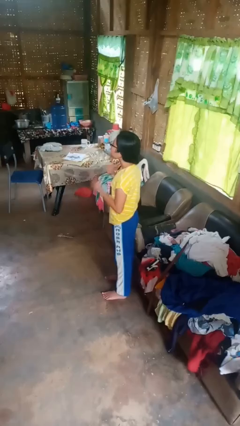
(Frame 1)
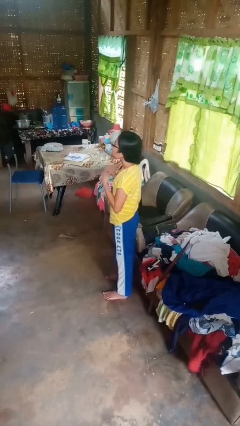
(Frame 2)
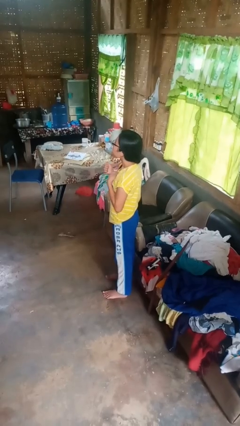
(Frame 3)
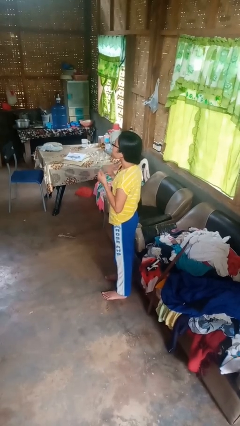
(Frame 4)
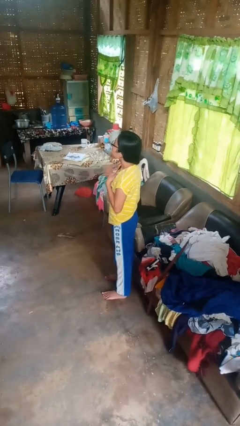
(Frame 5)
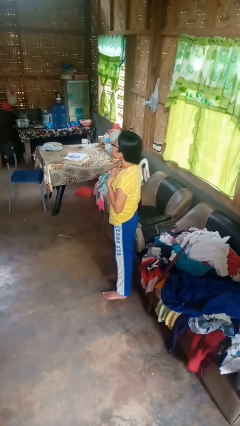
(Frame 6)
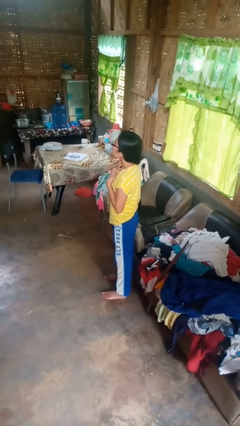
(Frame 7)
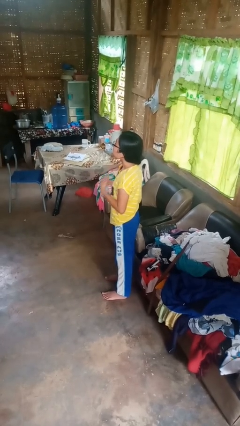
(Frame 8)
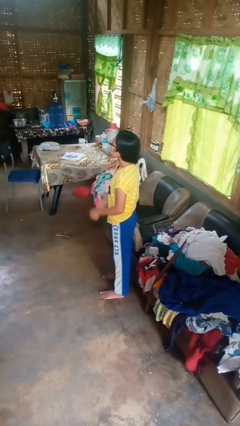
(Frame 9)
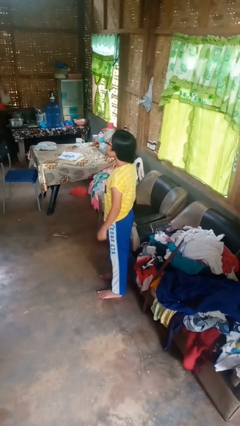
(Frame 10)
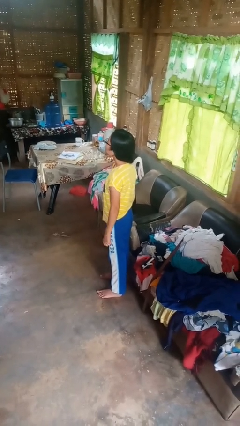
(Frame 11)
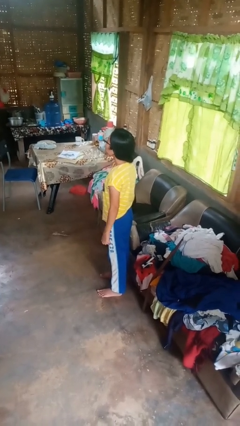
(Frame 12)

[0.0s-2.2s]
person drums on chest

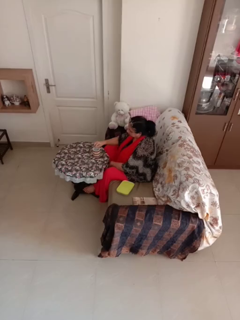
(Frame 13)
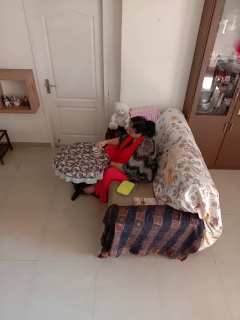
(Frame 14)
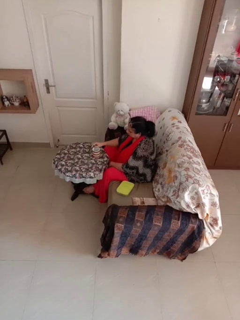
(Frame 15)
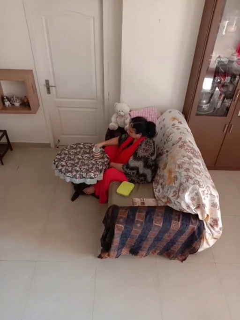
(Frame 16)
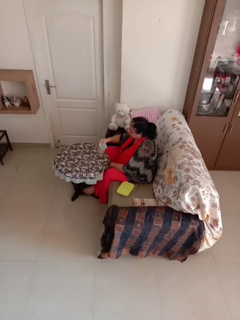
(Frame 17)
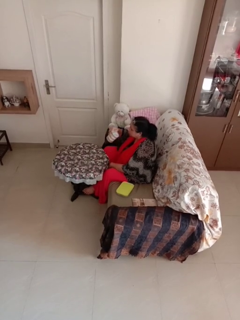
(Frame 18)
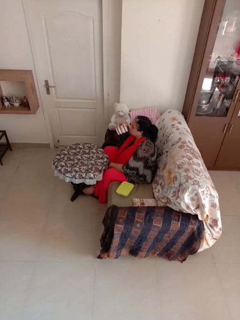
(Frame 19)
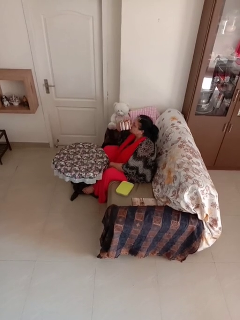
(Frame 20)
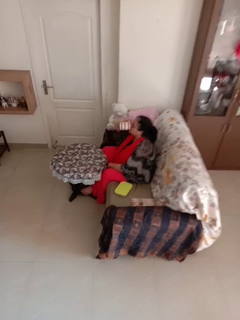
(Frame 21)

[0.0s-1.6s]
person stirs mug

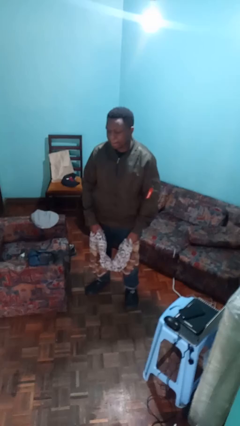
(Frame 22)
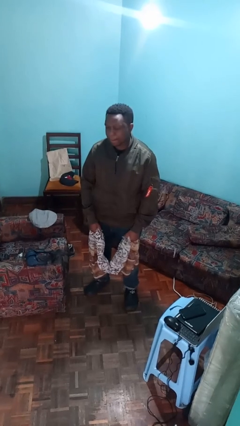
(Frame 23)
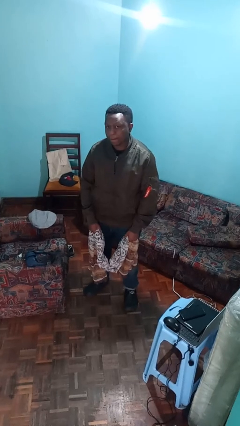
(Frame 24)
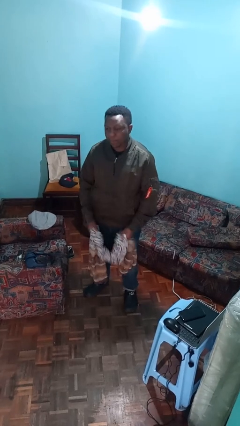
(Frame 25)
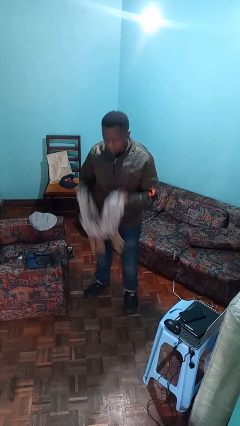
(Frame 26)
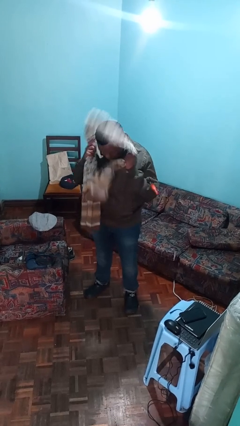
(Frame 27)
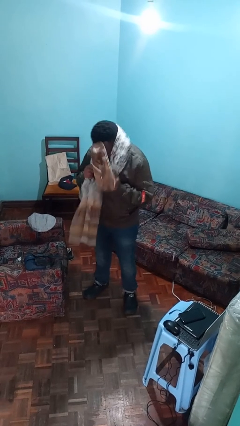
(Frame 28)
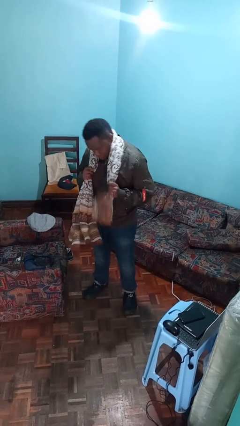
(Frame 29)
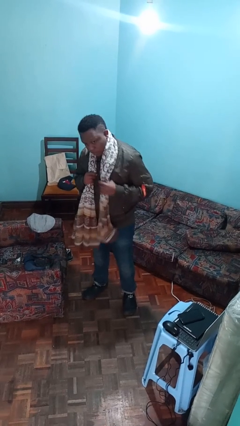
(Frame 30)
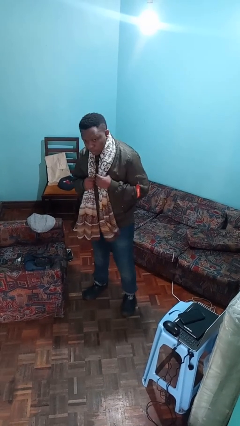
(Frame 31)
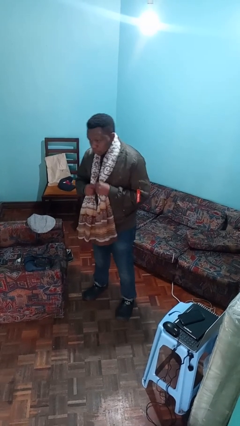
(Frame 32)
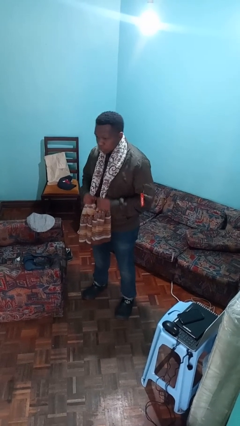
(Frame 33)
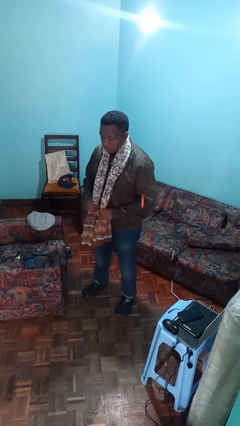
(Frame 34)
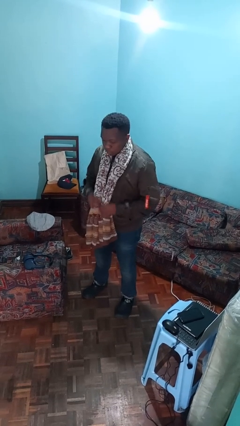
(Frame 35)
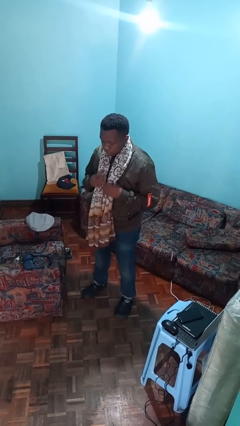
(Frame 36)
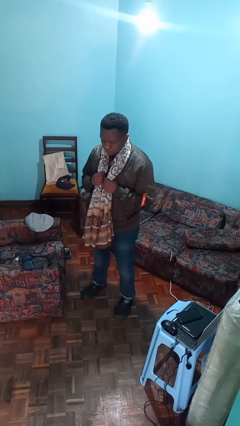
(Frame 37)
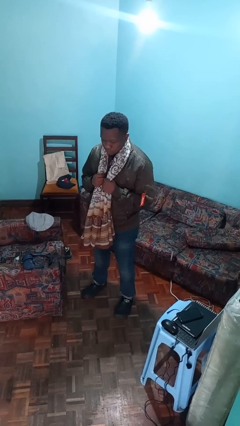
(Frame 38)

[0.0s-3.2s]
person puts on scarf

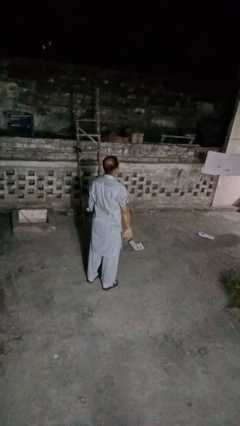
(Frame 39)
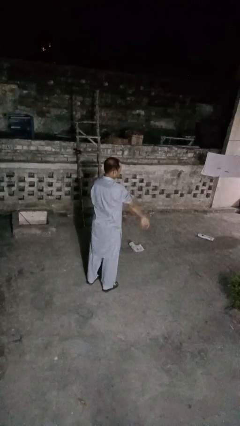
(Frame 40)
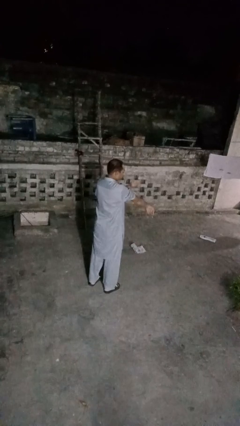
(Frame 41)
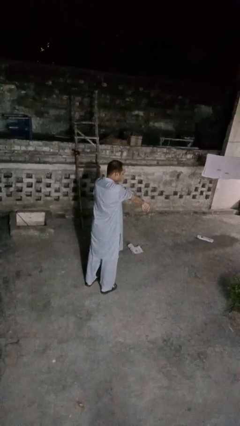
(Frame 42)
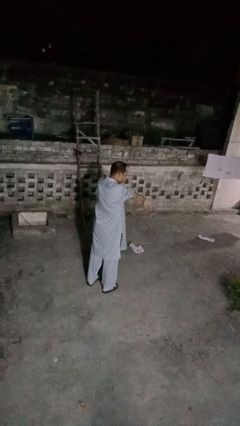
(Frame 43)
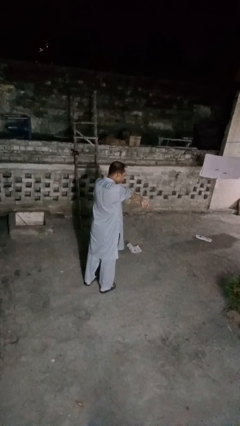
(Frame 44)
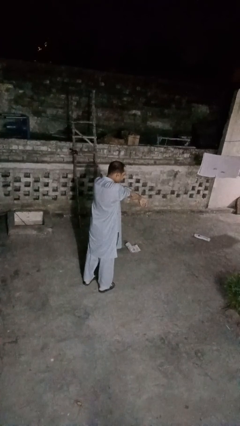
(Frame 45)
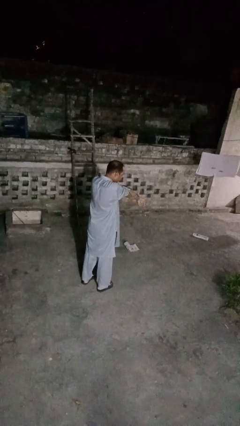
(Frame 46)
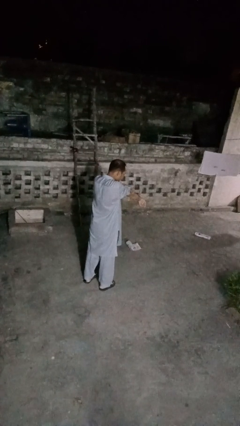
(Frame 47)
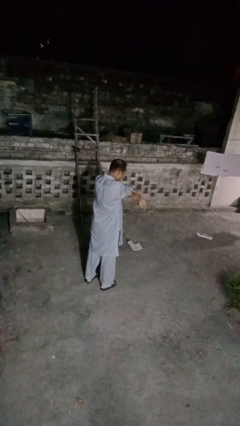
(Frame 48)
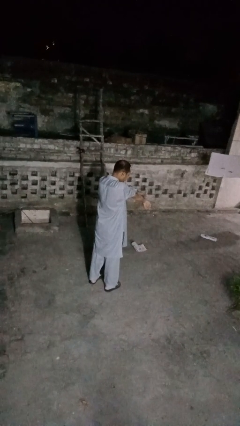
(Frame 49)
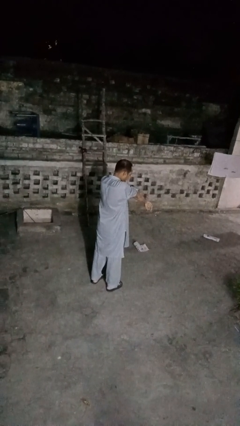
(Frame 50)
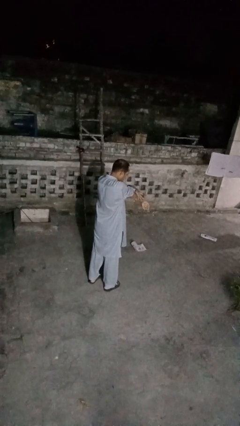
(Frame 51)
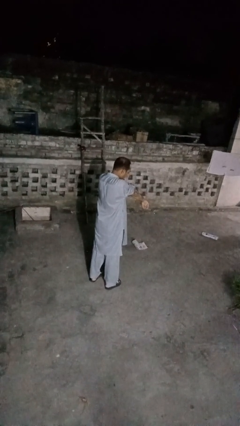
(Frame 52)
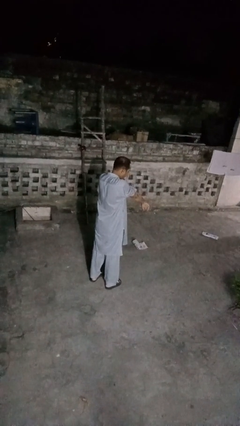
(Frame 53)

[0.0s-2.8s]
person swats bug

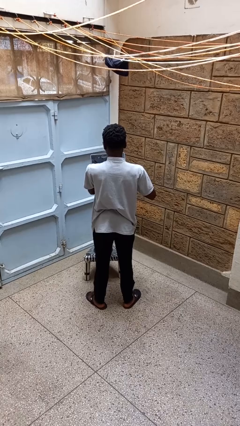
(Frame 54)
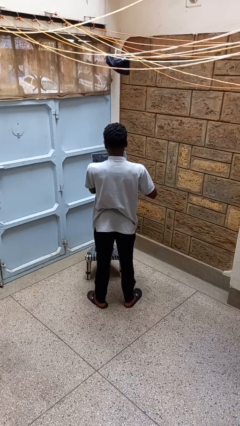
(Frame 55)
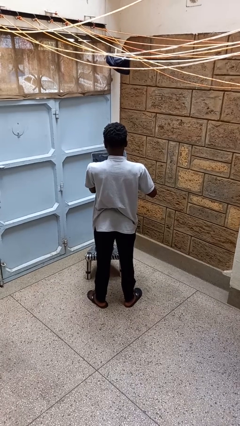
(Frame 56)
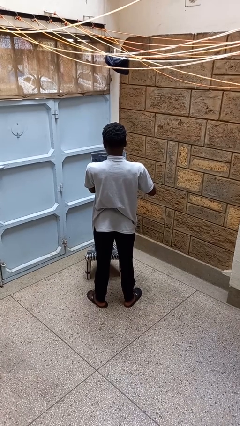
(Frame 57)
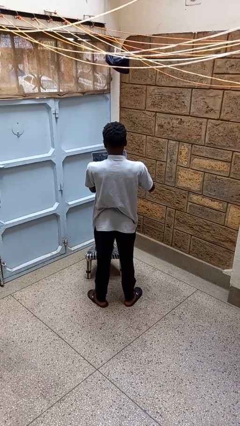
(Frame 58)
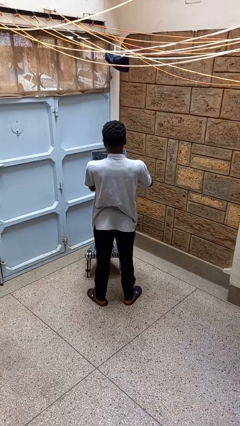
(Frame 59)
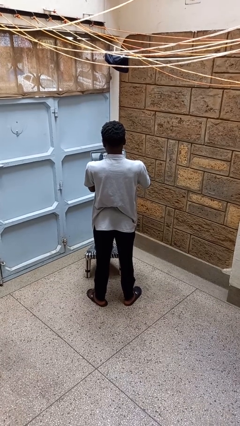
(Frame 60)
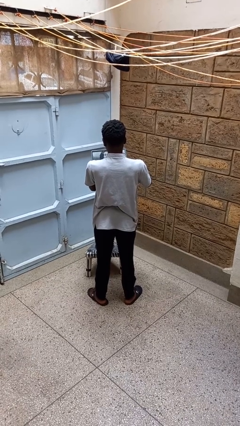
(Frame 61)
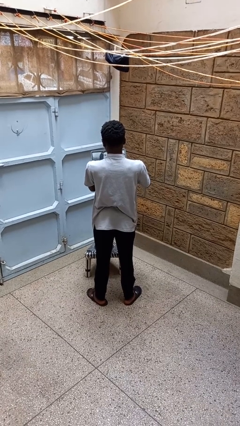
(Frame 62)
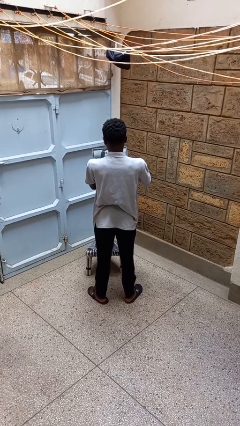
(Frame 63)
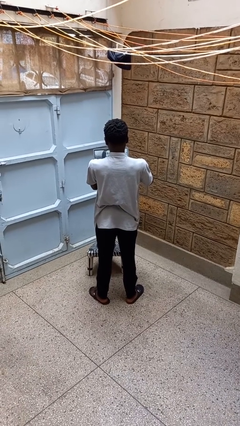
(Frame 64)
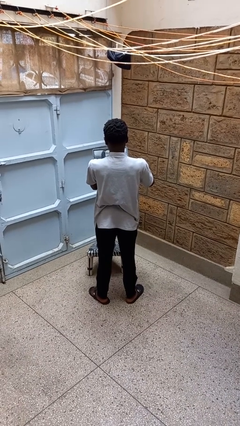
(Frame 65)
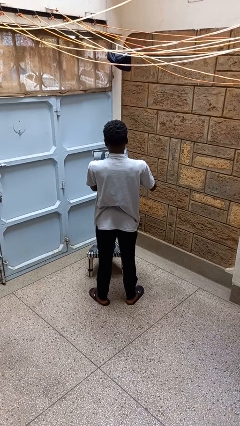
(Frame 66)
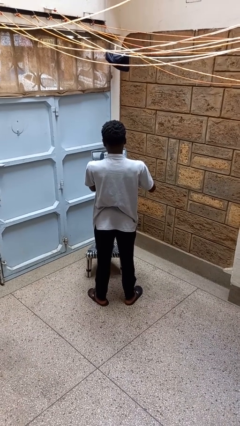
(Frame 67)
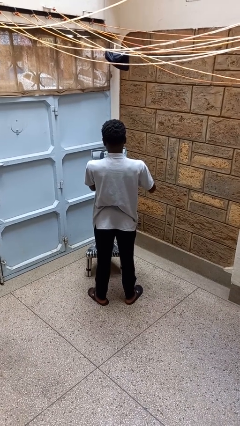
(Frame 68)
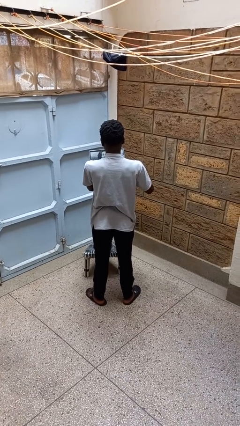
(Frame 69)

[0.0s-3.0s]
person interacts with tablet

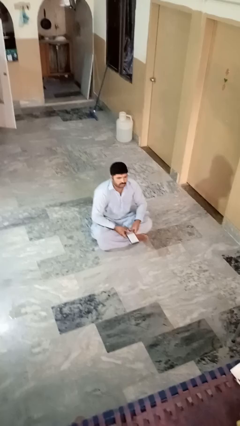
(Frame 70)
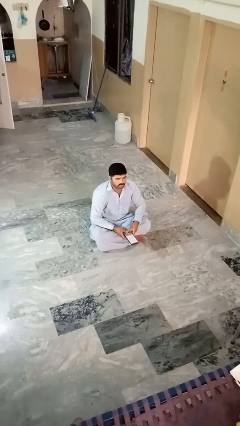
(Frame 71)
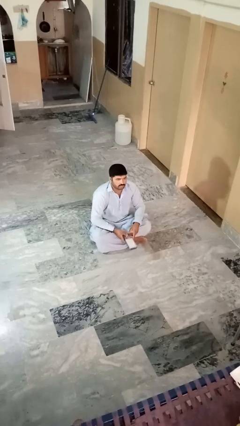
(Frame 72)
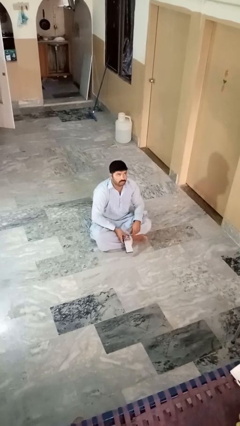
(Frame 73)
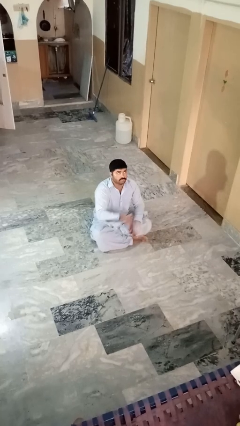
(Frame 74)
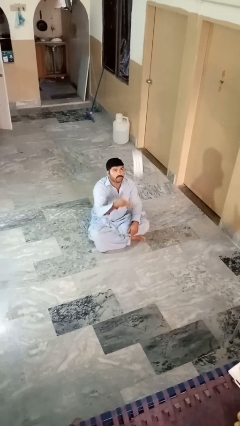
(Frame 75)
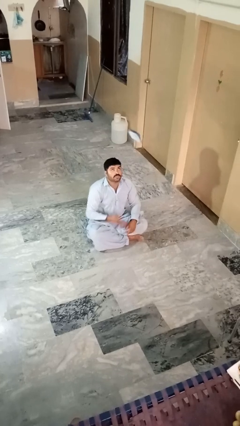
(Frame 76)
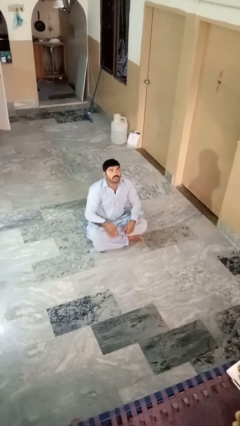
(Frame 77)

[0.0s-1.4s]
person drops object

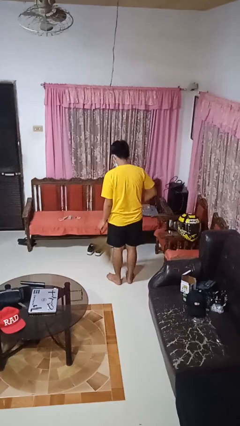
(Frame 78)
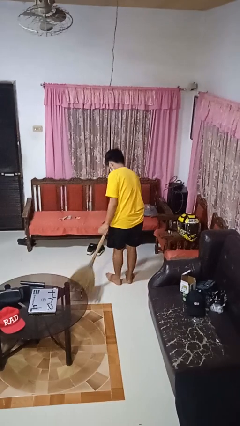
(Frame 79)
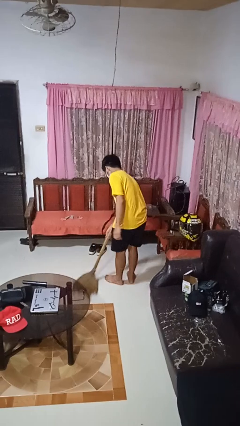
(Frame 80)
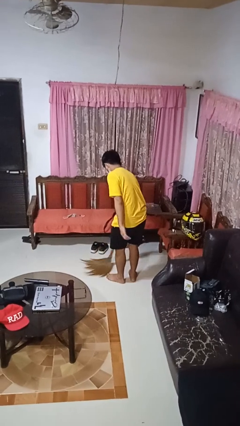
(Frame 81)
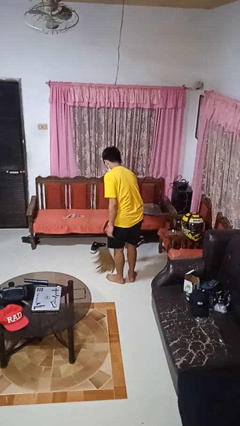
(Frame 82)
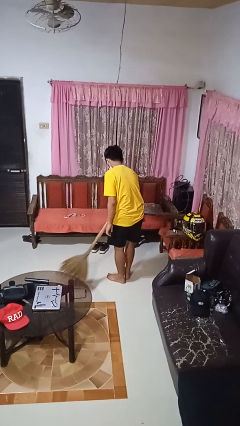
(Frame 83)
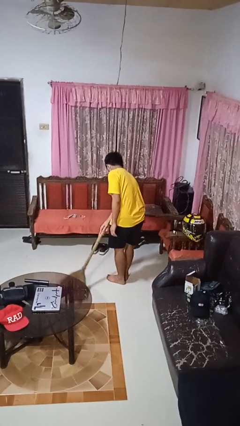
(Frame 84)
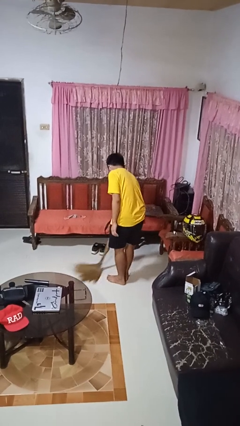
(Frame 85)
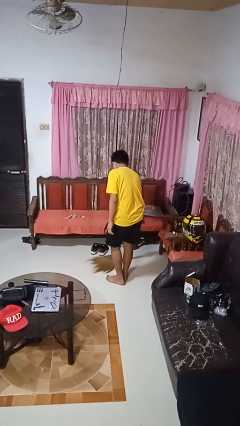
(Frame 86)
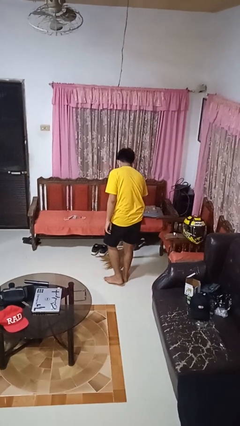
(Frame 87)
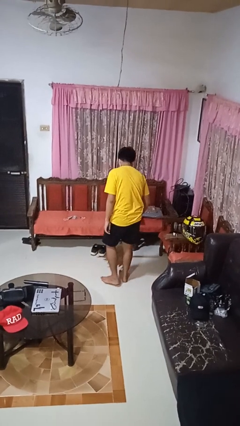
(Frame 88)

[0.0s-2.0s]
person sweeps floor

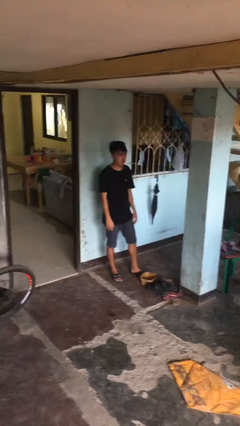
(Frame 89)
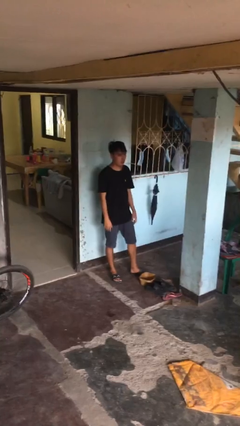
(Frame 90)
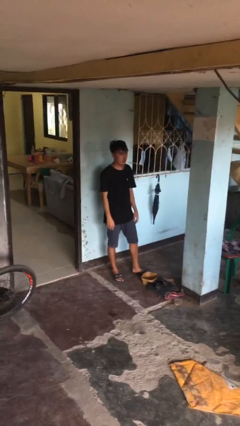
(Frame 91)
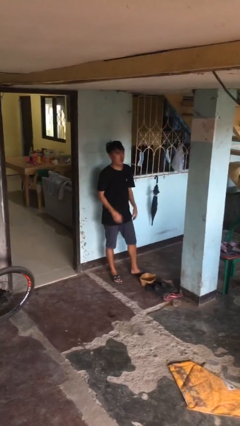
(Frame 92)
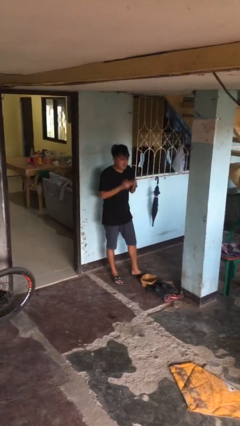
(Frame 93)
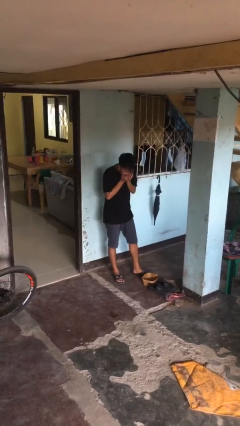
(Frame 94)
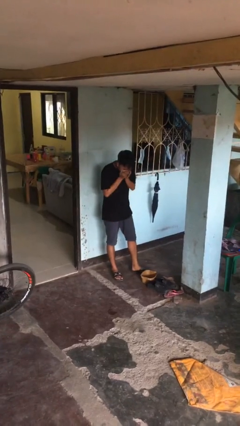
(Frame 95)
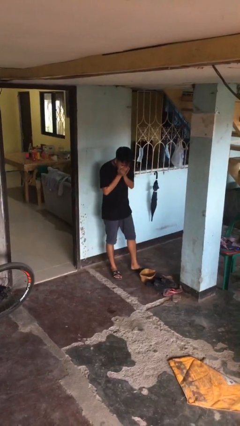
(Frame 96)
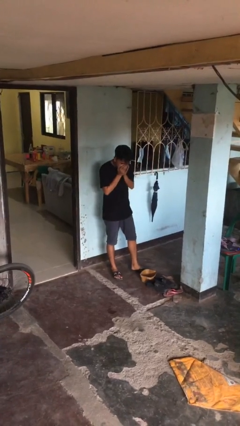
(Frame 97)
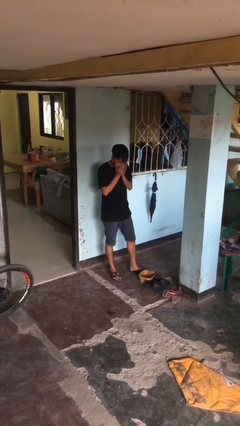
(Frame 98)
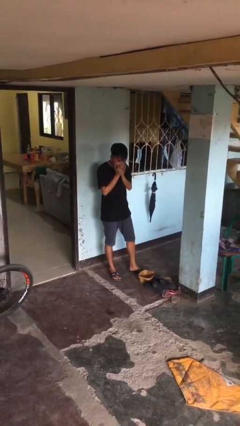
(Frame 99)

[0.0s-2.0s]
person sneezes into hand
